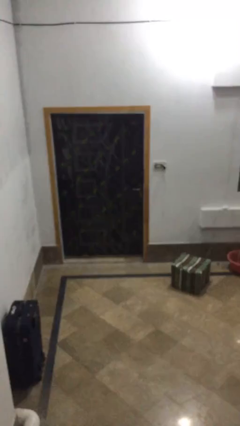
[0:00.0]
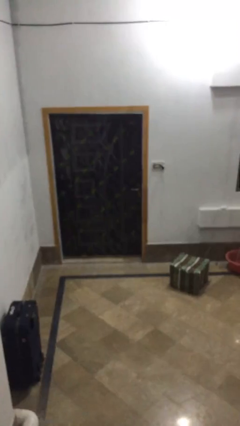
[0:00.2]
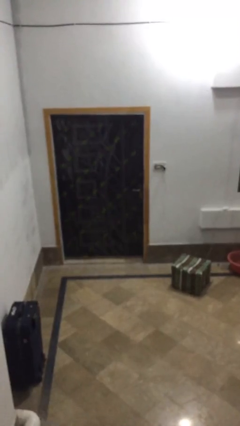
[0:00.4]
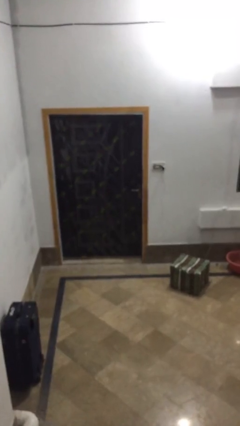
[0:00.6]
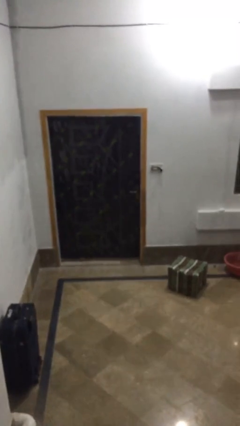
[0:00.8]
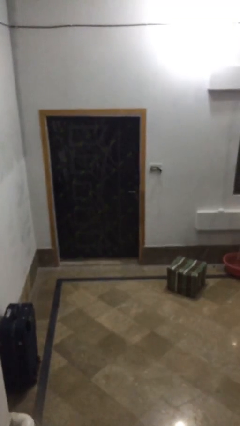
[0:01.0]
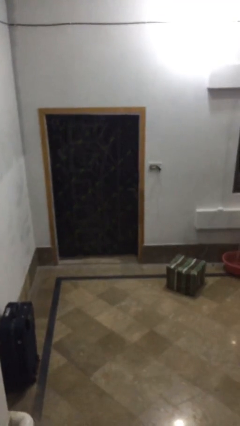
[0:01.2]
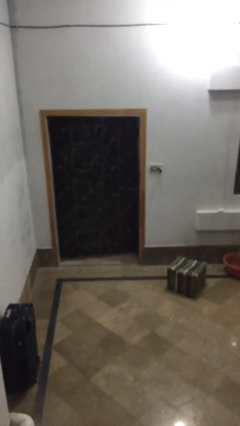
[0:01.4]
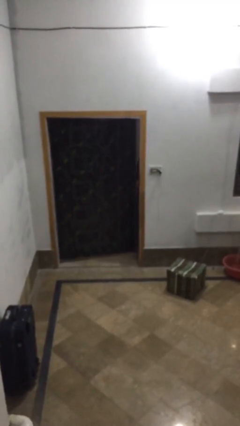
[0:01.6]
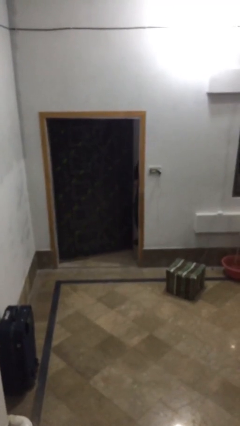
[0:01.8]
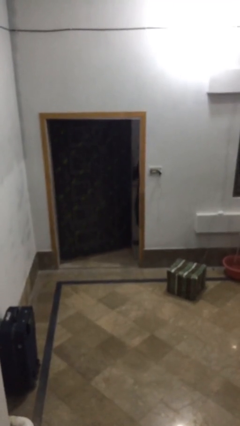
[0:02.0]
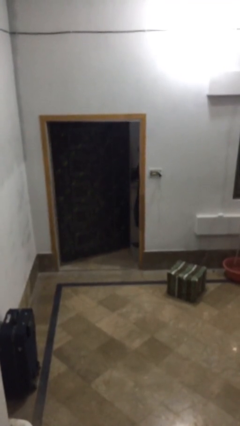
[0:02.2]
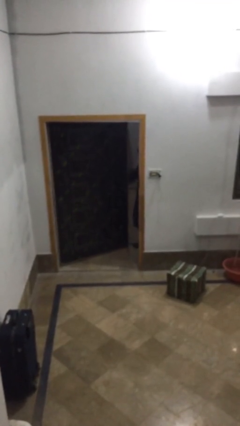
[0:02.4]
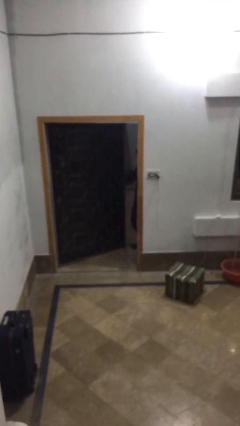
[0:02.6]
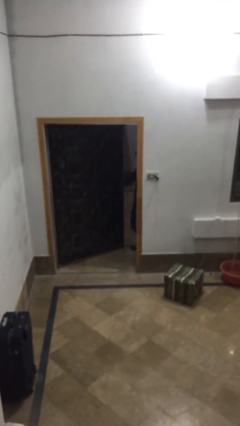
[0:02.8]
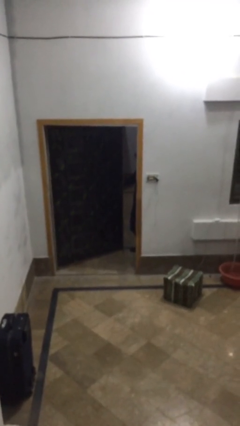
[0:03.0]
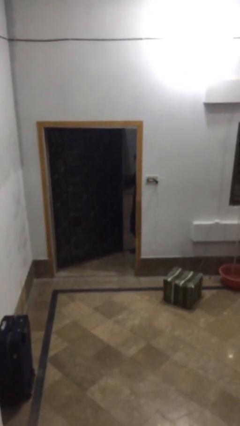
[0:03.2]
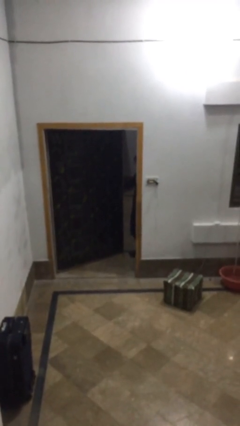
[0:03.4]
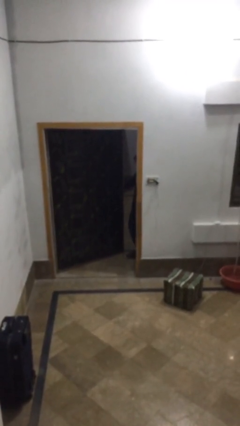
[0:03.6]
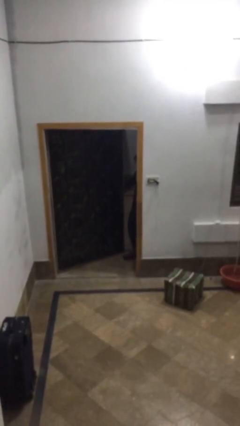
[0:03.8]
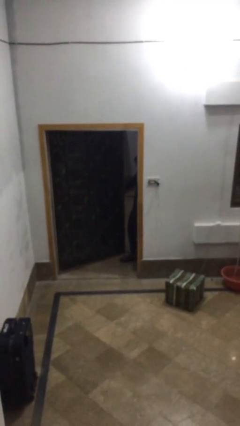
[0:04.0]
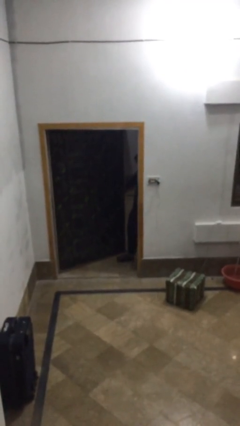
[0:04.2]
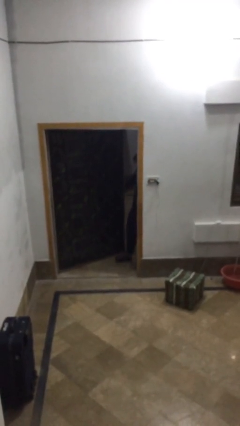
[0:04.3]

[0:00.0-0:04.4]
person opens facility door

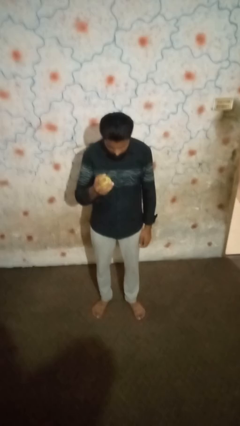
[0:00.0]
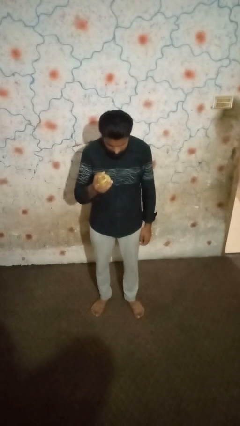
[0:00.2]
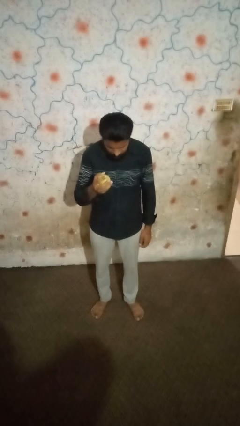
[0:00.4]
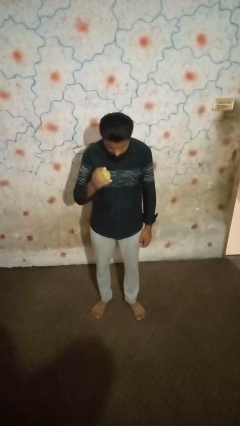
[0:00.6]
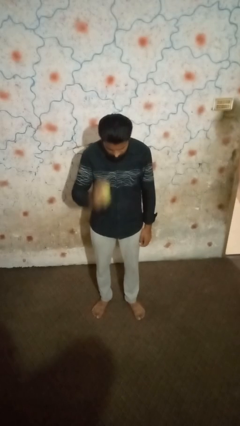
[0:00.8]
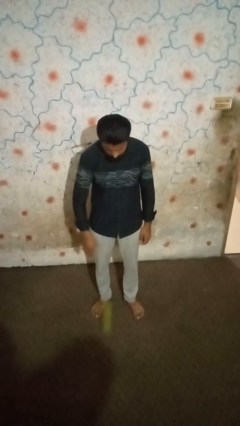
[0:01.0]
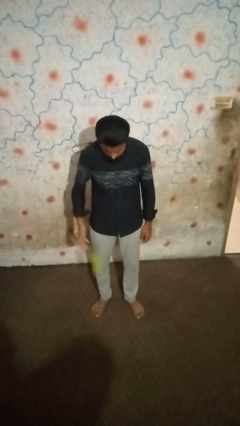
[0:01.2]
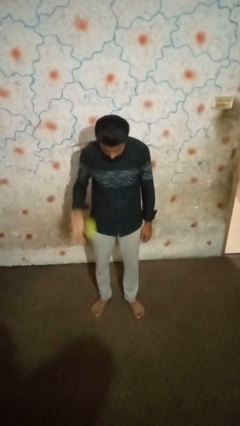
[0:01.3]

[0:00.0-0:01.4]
person bounces ball on floor

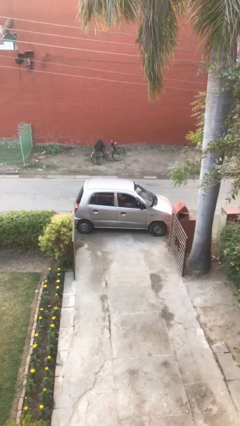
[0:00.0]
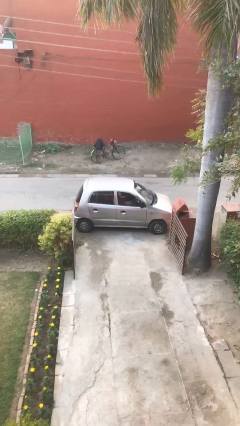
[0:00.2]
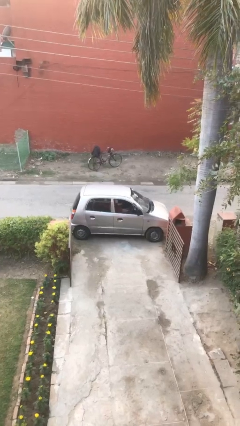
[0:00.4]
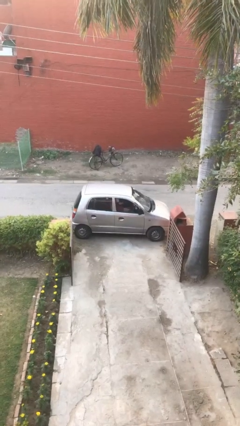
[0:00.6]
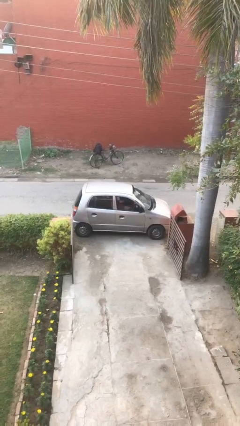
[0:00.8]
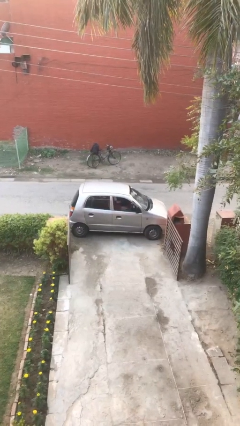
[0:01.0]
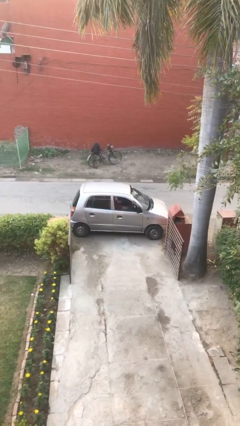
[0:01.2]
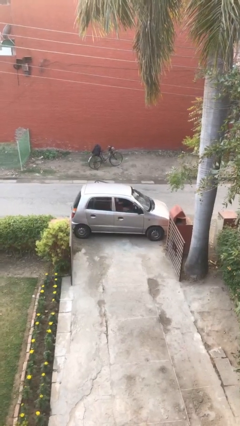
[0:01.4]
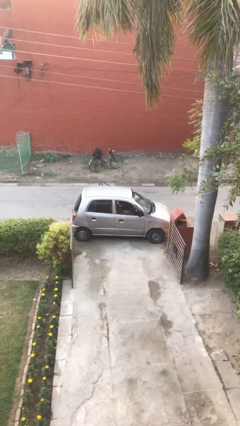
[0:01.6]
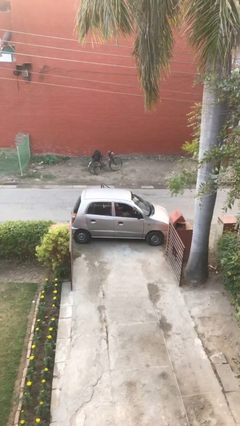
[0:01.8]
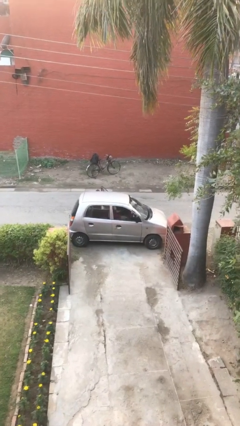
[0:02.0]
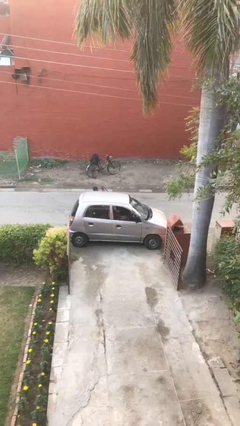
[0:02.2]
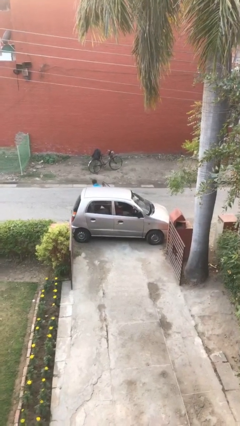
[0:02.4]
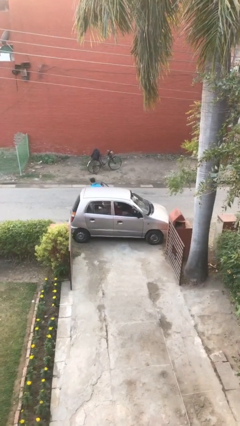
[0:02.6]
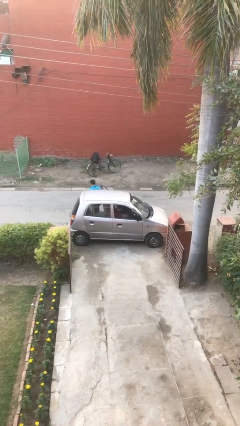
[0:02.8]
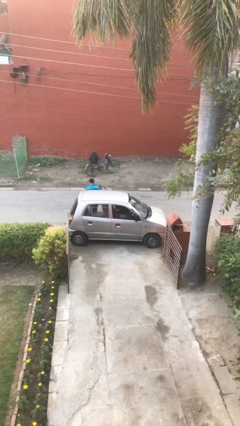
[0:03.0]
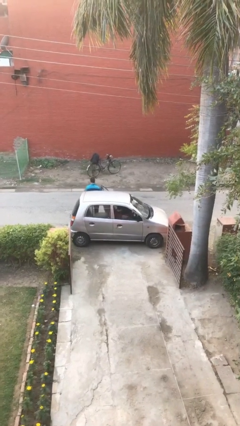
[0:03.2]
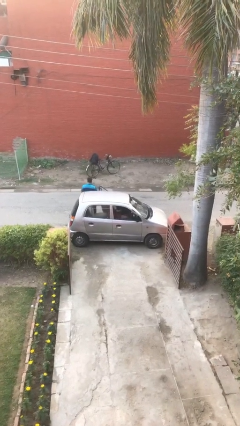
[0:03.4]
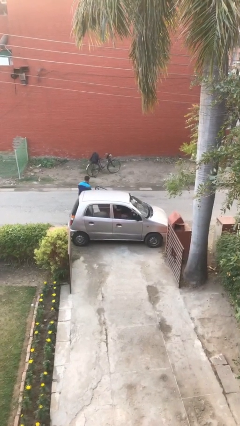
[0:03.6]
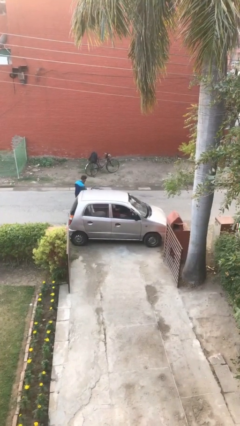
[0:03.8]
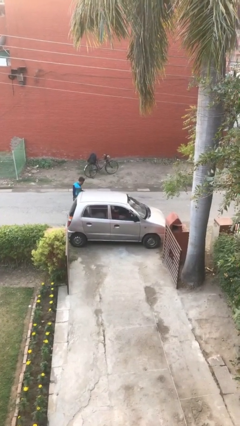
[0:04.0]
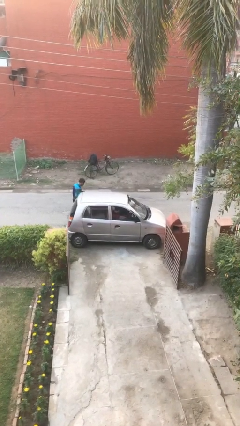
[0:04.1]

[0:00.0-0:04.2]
car drops off person

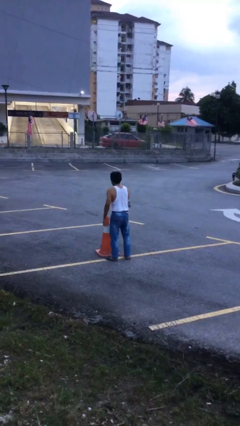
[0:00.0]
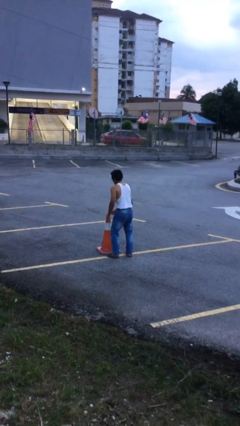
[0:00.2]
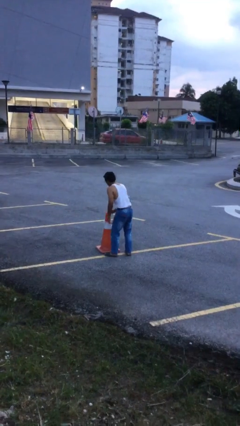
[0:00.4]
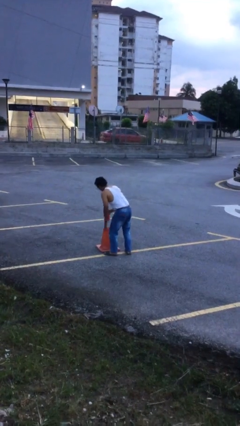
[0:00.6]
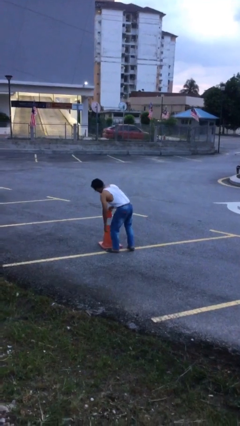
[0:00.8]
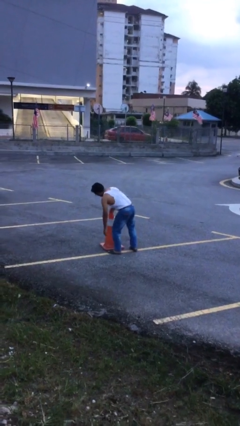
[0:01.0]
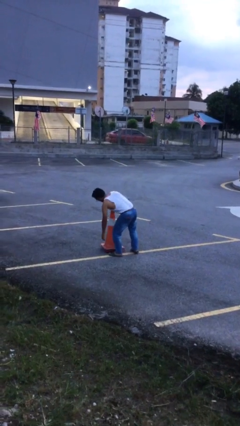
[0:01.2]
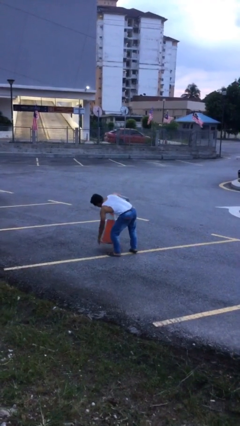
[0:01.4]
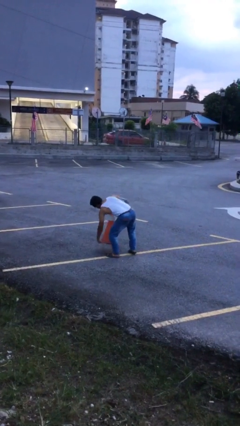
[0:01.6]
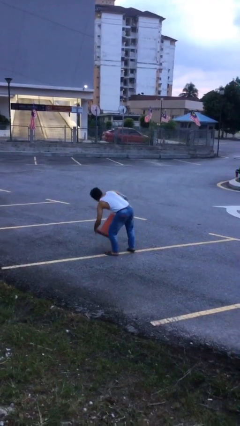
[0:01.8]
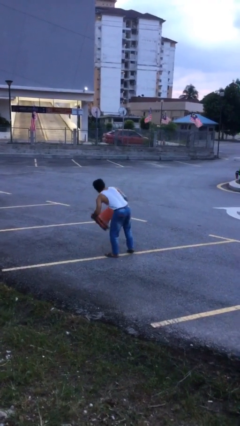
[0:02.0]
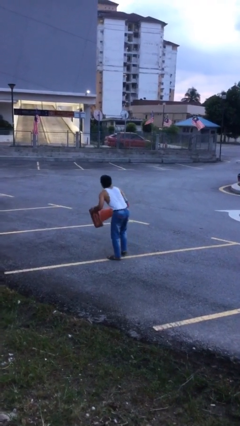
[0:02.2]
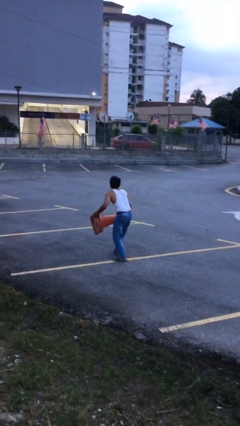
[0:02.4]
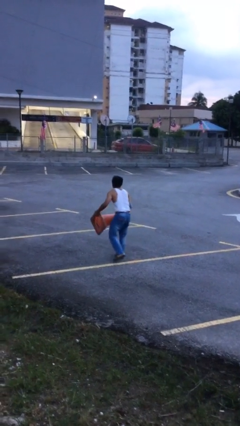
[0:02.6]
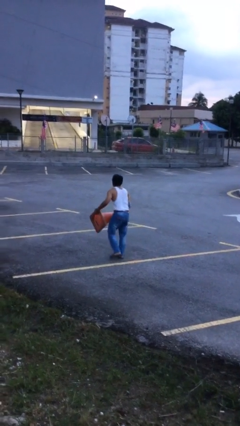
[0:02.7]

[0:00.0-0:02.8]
person picks up object from floor

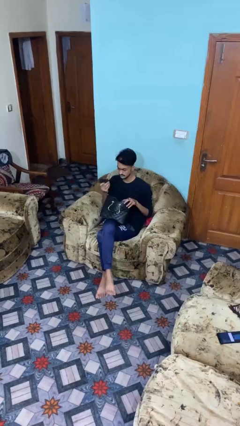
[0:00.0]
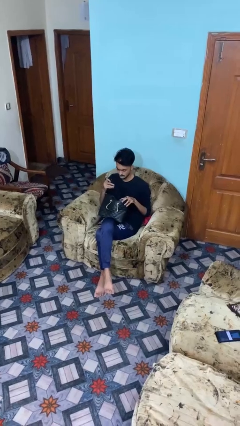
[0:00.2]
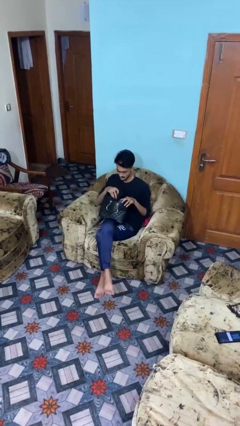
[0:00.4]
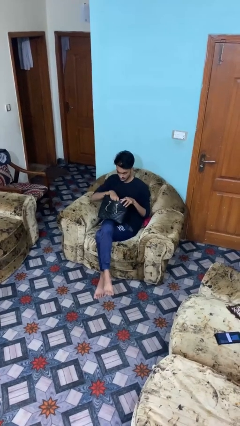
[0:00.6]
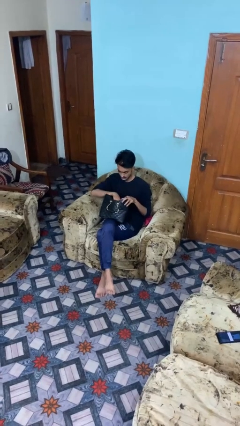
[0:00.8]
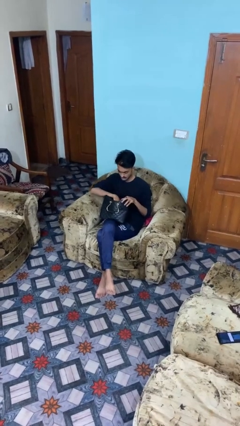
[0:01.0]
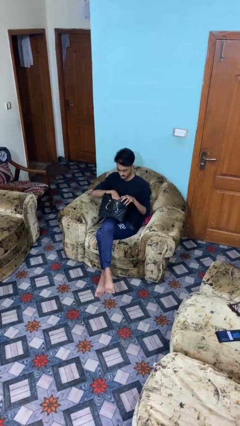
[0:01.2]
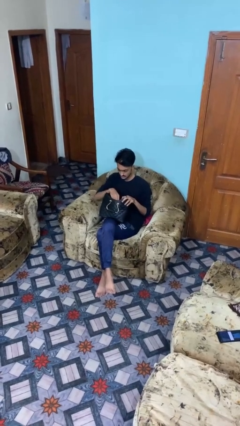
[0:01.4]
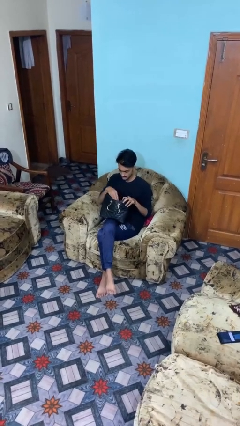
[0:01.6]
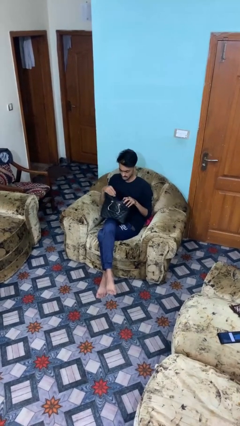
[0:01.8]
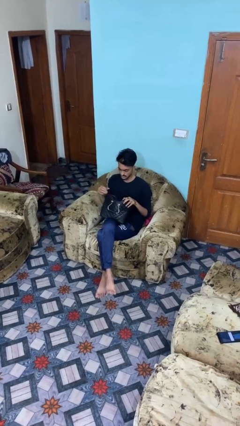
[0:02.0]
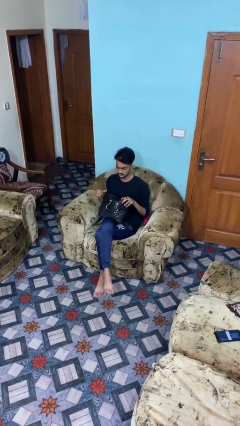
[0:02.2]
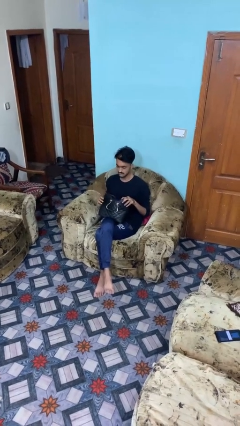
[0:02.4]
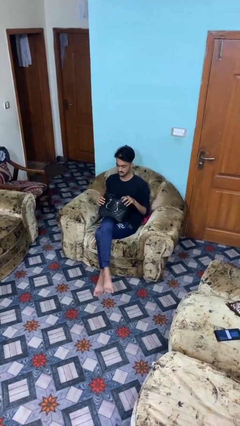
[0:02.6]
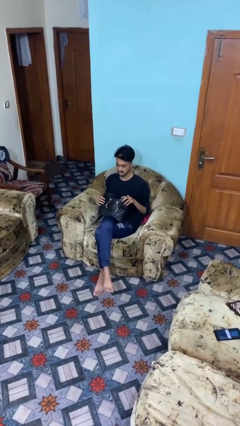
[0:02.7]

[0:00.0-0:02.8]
person puts object into purse

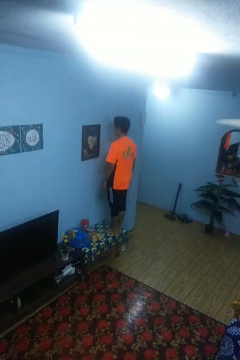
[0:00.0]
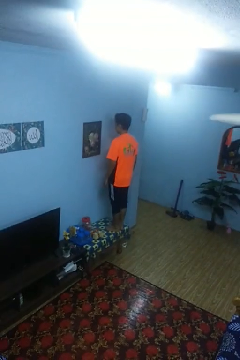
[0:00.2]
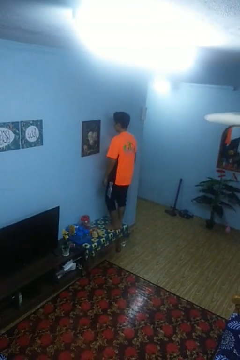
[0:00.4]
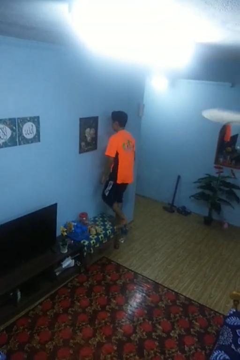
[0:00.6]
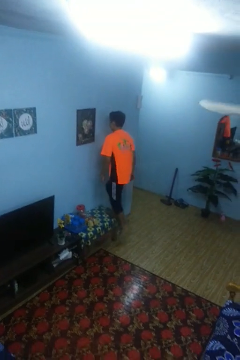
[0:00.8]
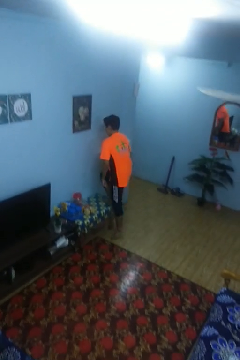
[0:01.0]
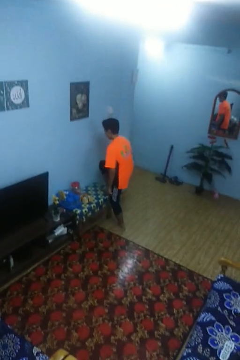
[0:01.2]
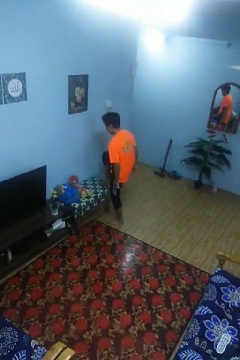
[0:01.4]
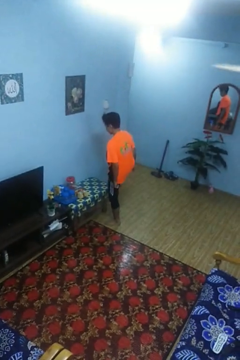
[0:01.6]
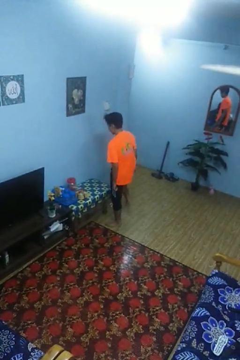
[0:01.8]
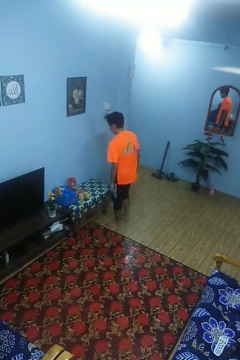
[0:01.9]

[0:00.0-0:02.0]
person climbs off table
